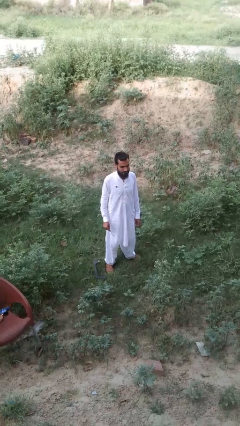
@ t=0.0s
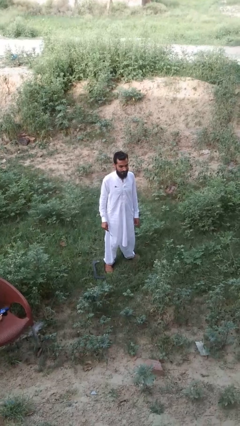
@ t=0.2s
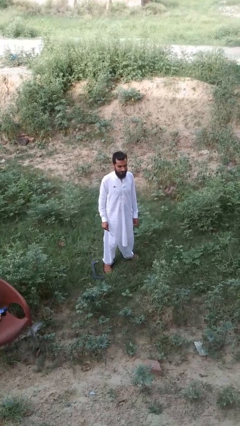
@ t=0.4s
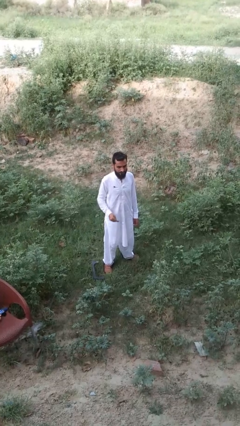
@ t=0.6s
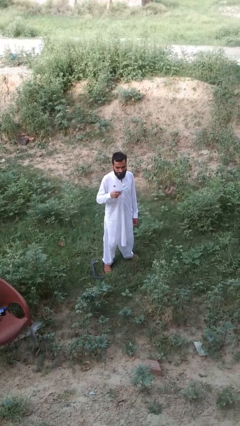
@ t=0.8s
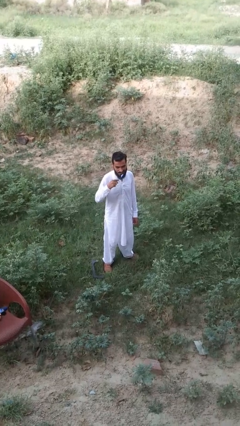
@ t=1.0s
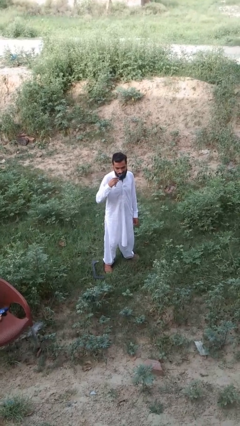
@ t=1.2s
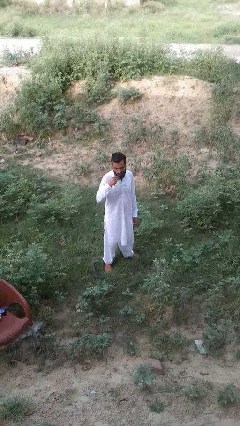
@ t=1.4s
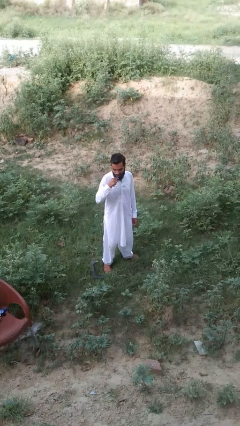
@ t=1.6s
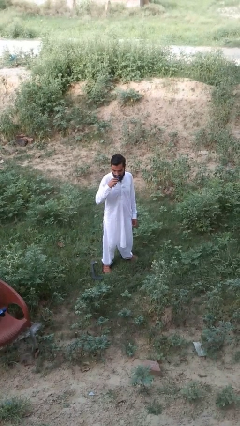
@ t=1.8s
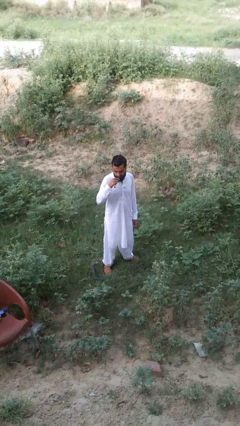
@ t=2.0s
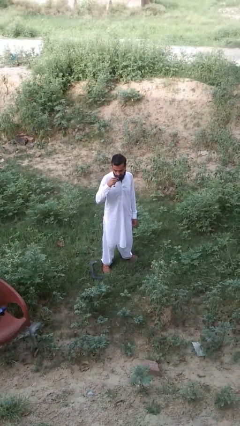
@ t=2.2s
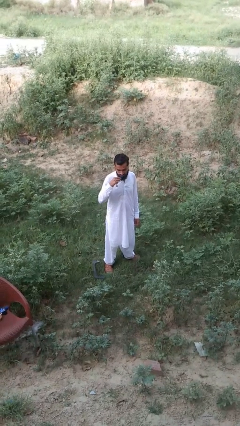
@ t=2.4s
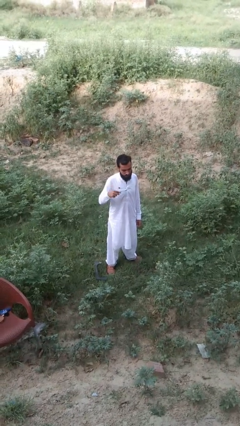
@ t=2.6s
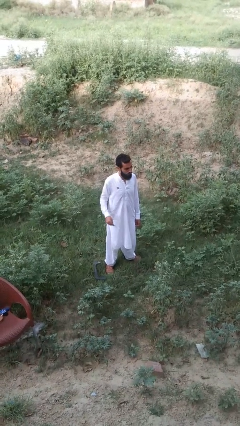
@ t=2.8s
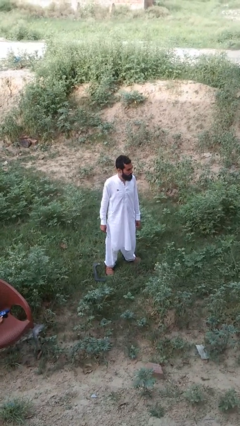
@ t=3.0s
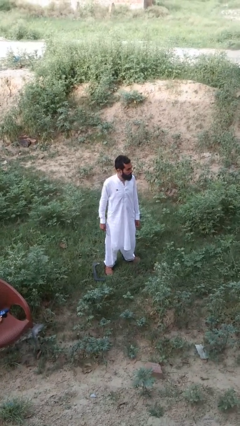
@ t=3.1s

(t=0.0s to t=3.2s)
person brushes teeth

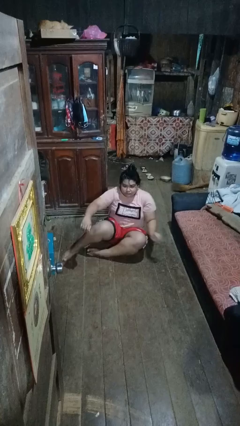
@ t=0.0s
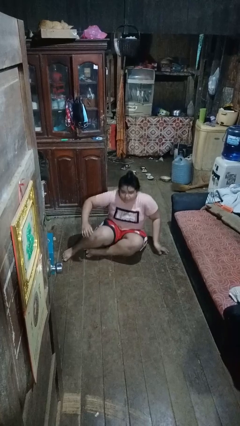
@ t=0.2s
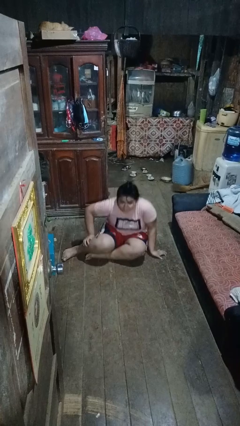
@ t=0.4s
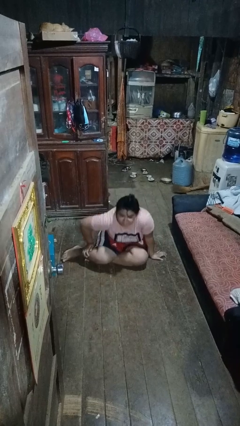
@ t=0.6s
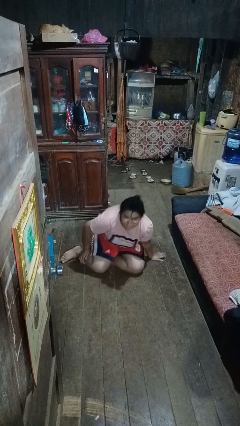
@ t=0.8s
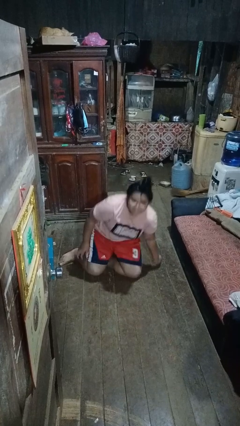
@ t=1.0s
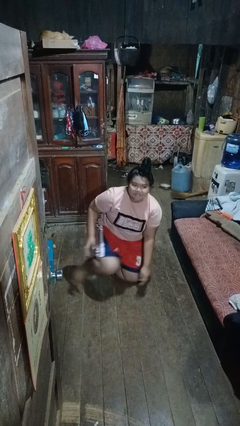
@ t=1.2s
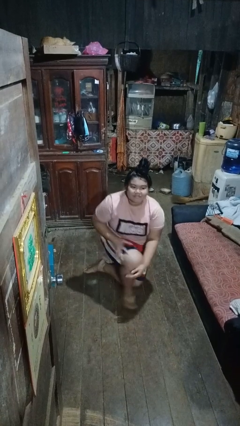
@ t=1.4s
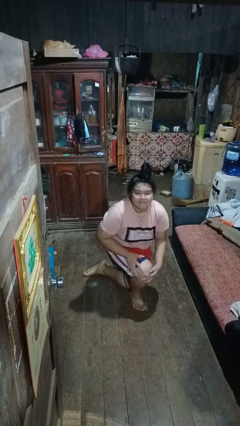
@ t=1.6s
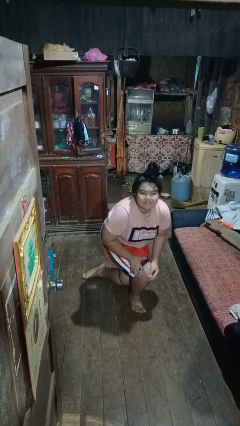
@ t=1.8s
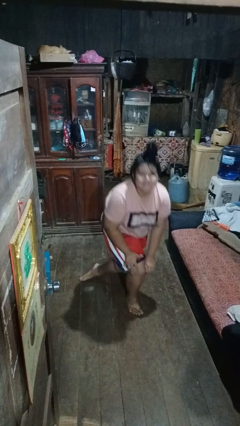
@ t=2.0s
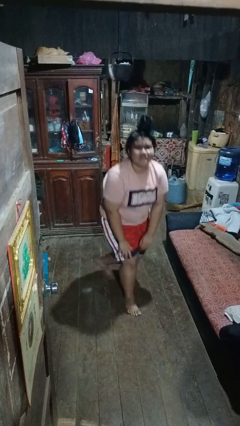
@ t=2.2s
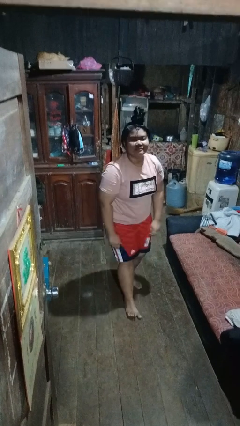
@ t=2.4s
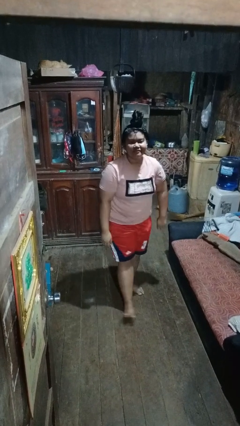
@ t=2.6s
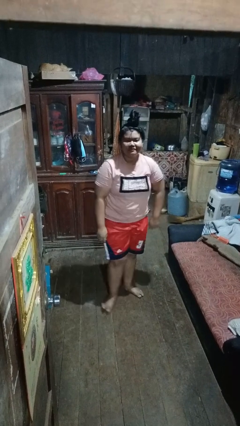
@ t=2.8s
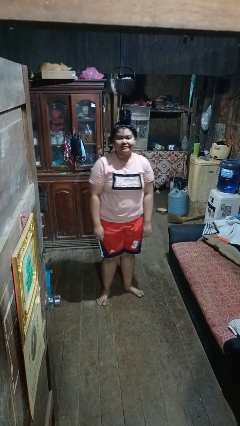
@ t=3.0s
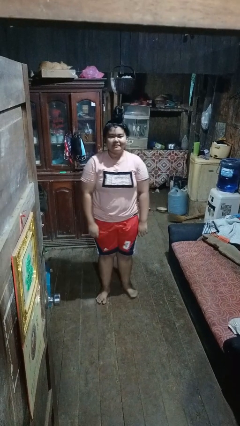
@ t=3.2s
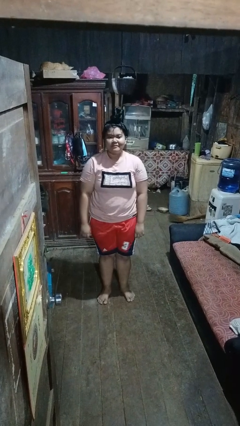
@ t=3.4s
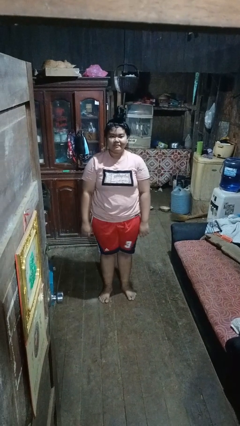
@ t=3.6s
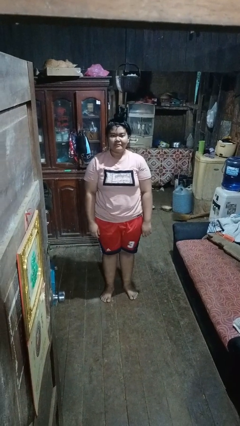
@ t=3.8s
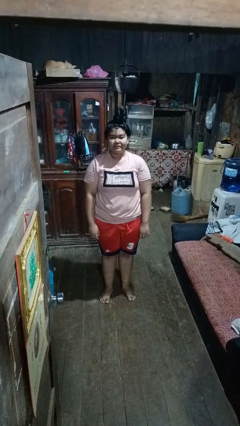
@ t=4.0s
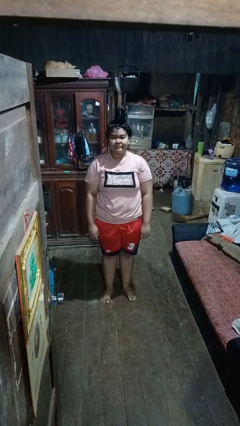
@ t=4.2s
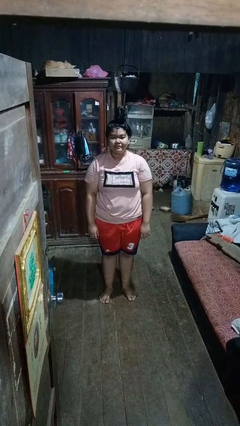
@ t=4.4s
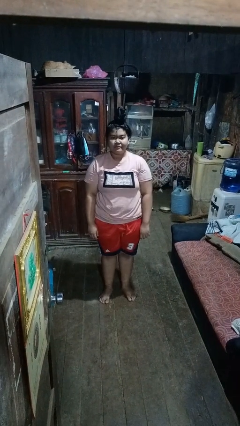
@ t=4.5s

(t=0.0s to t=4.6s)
person stands up from floor

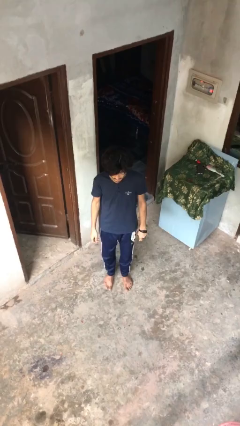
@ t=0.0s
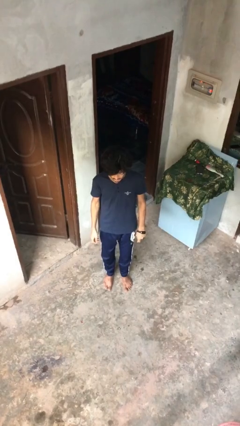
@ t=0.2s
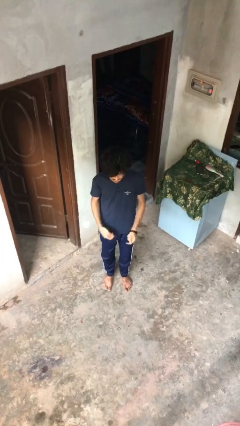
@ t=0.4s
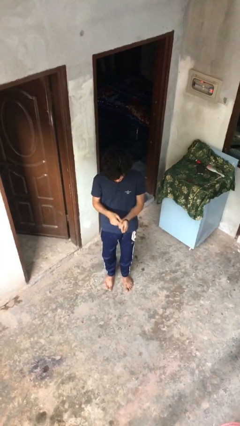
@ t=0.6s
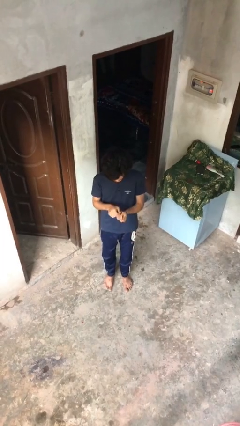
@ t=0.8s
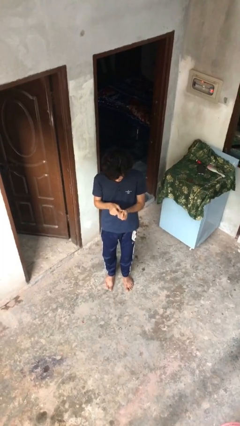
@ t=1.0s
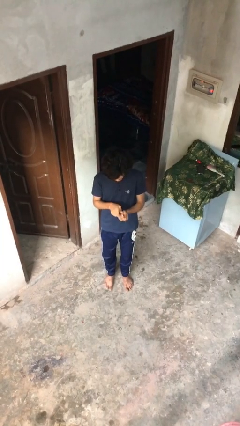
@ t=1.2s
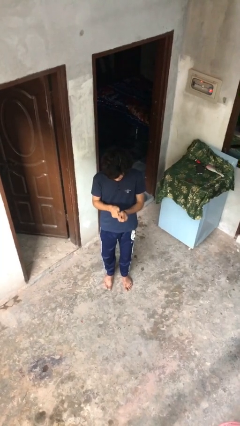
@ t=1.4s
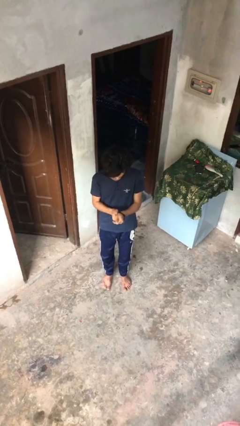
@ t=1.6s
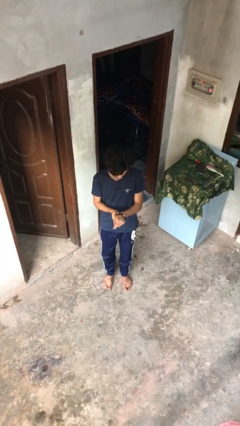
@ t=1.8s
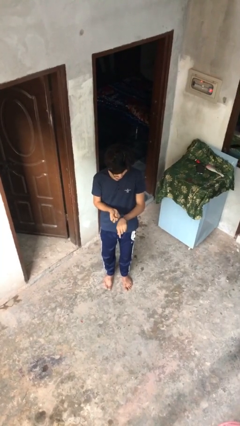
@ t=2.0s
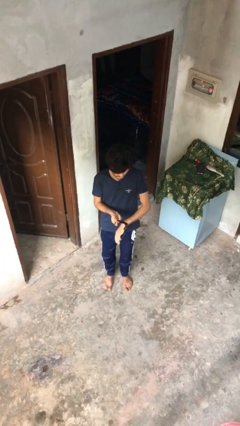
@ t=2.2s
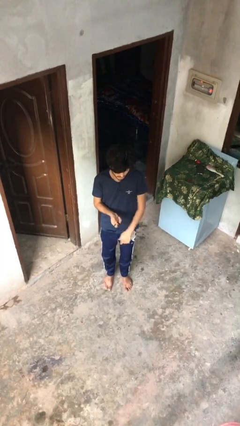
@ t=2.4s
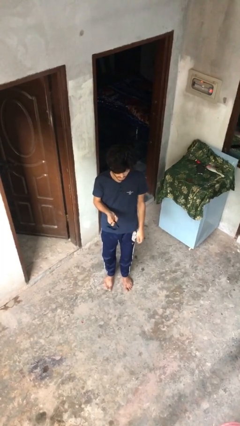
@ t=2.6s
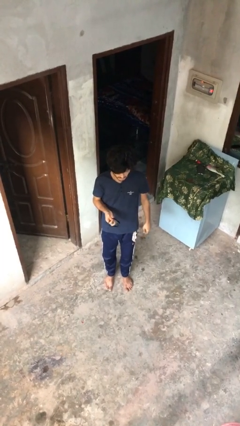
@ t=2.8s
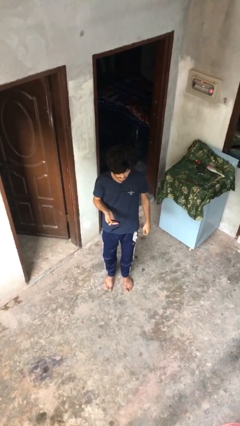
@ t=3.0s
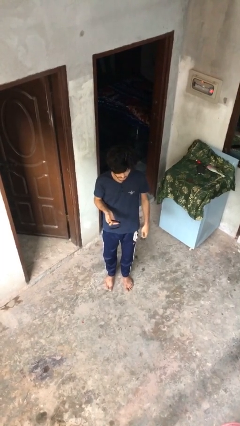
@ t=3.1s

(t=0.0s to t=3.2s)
person takes off wristwatch

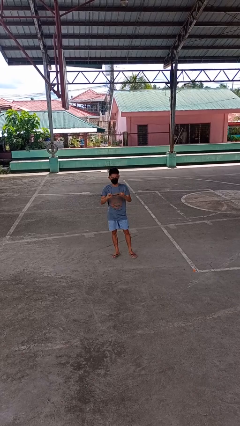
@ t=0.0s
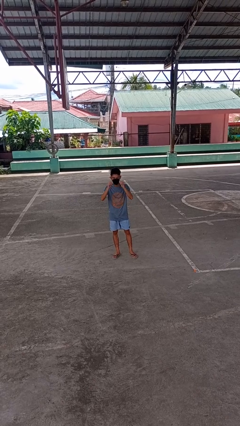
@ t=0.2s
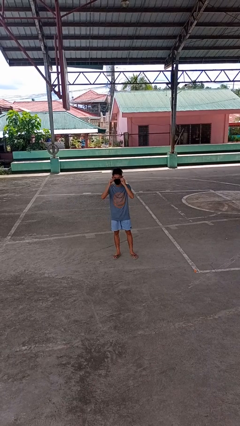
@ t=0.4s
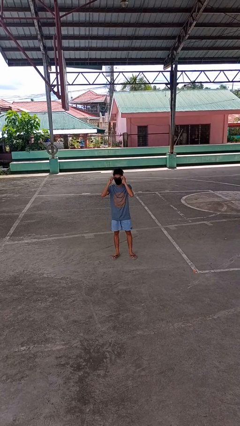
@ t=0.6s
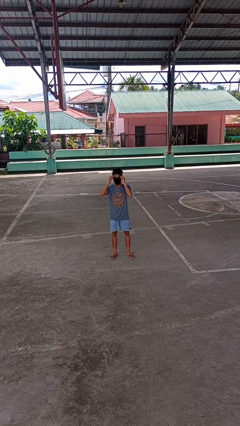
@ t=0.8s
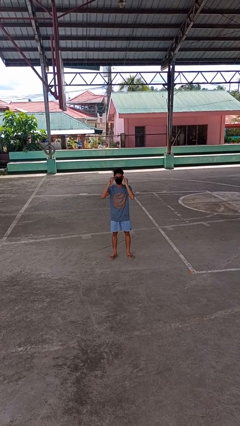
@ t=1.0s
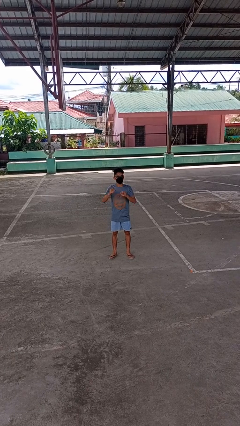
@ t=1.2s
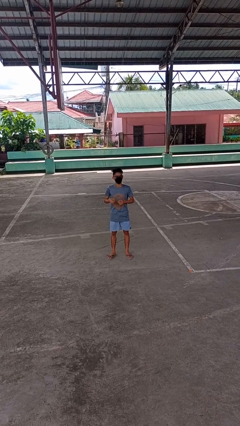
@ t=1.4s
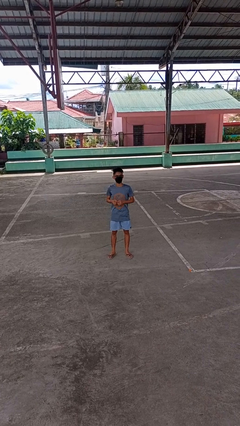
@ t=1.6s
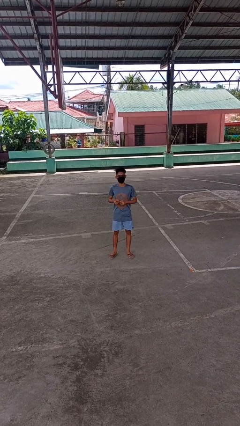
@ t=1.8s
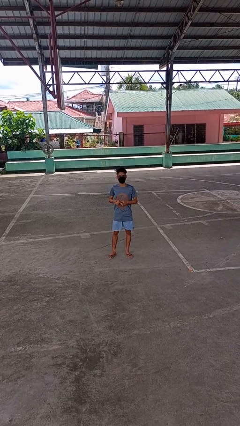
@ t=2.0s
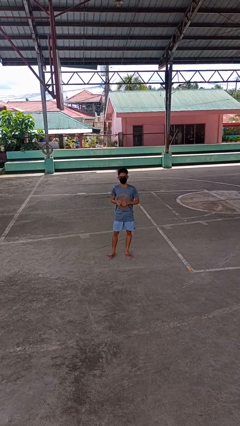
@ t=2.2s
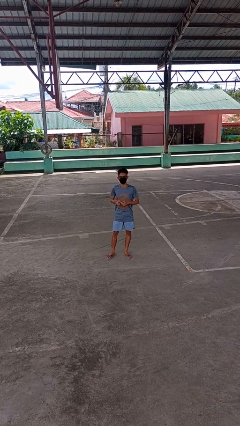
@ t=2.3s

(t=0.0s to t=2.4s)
person puts on glasses

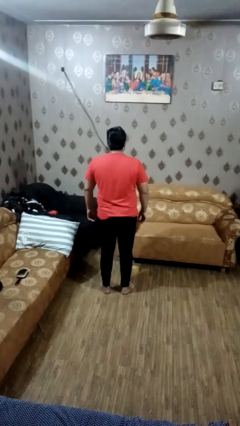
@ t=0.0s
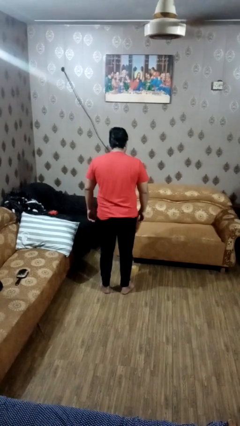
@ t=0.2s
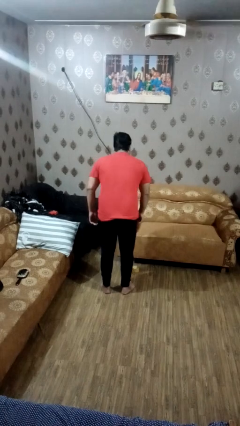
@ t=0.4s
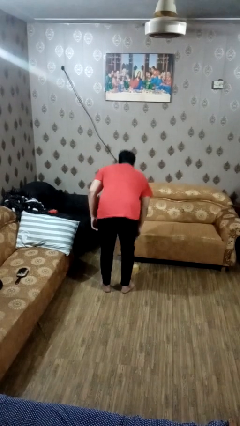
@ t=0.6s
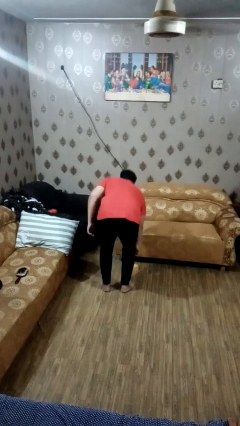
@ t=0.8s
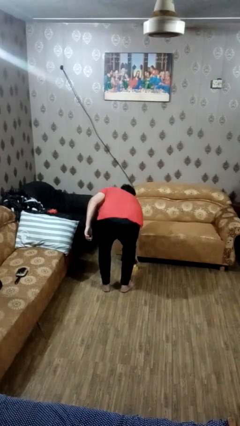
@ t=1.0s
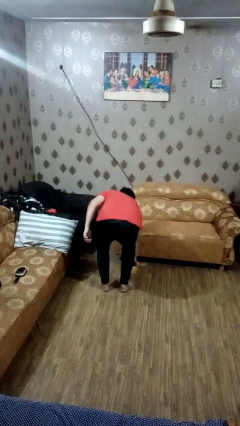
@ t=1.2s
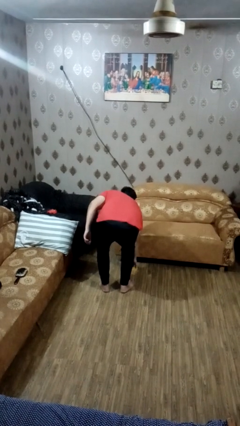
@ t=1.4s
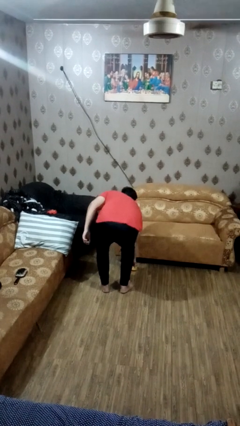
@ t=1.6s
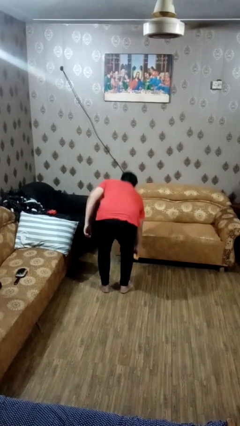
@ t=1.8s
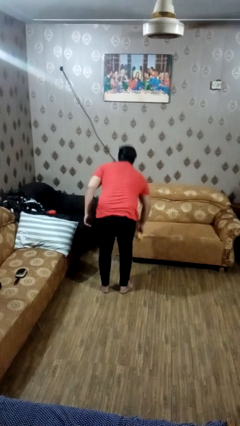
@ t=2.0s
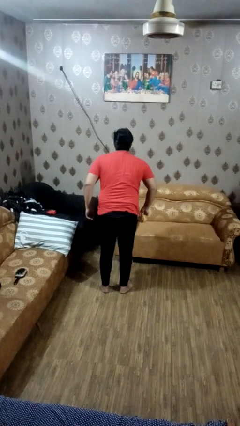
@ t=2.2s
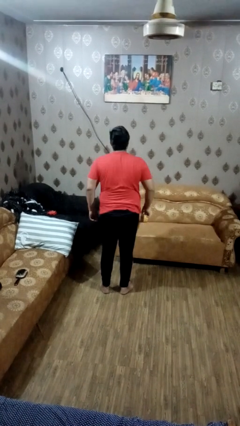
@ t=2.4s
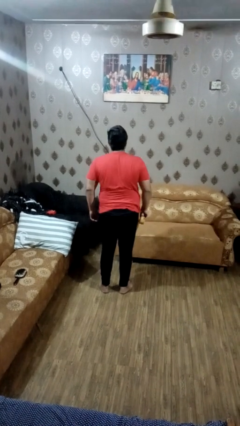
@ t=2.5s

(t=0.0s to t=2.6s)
person picks up object from floor

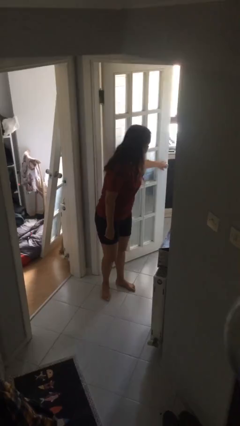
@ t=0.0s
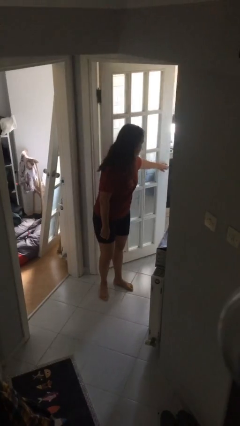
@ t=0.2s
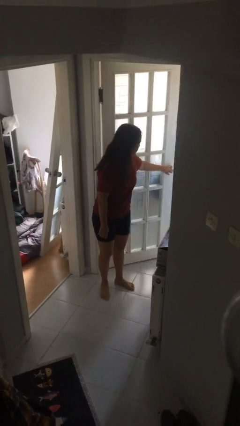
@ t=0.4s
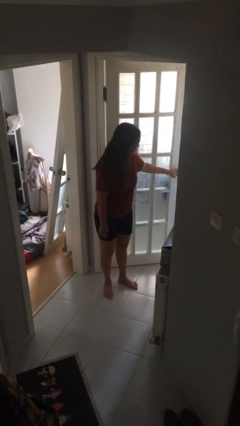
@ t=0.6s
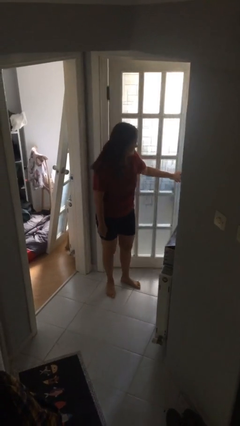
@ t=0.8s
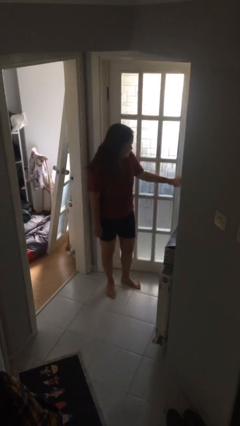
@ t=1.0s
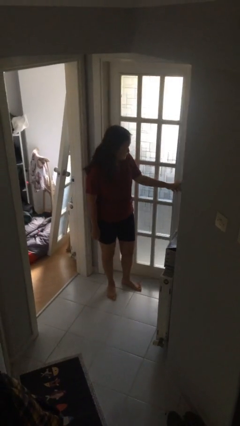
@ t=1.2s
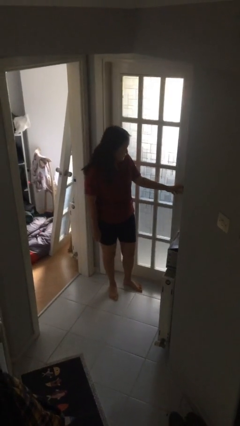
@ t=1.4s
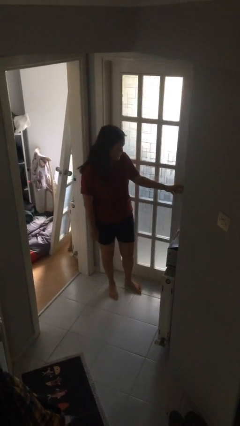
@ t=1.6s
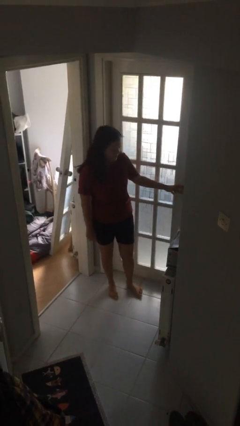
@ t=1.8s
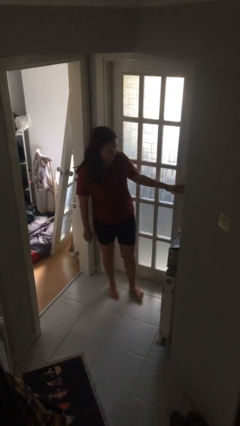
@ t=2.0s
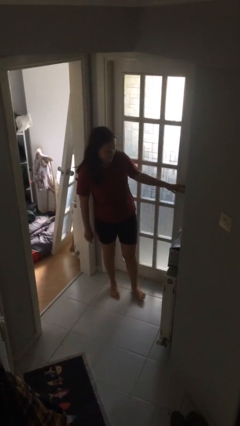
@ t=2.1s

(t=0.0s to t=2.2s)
person closes facility door
